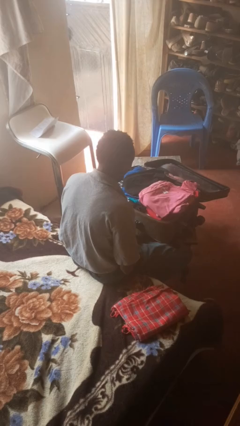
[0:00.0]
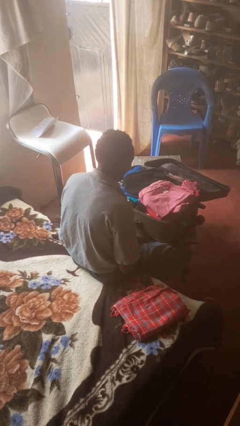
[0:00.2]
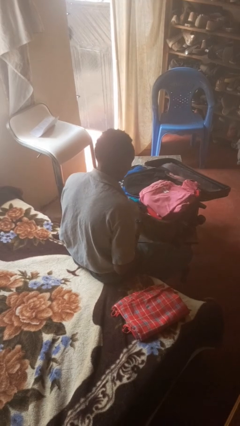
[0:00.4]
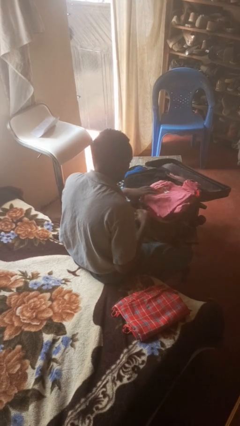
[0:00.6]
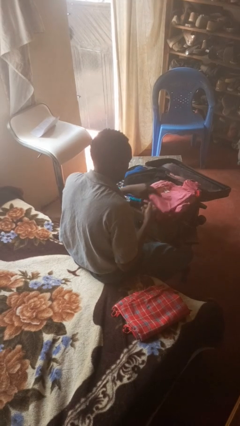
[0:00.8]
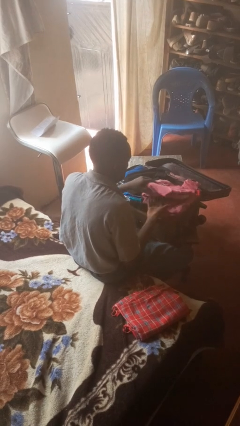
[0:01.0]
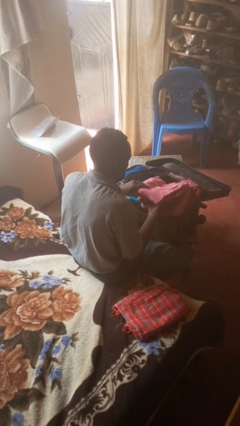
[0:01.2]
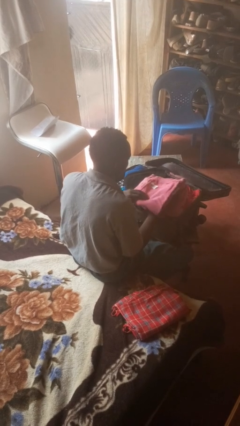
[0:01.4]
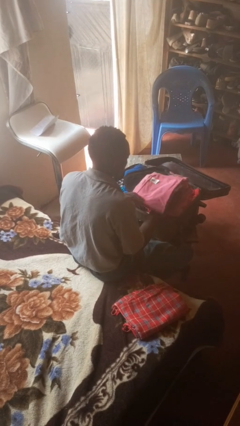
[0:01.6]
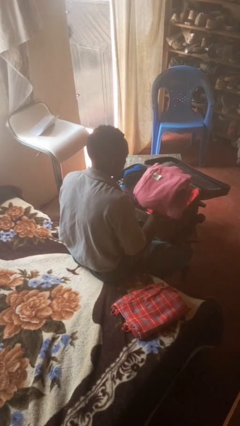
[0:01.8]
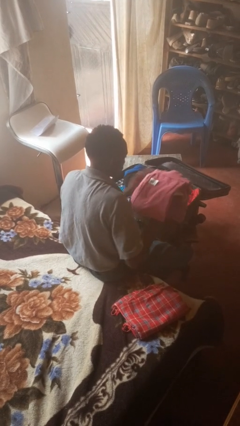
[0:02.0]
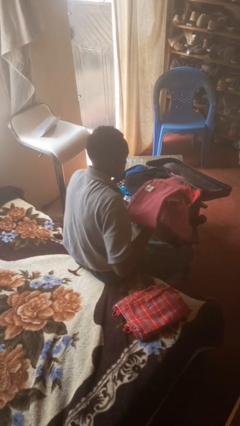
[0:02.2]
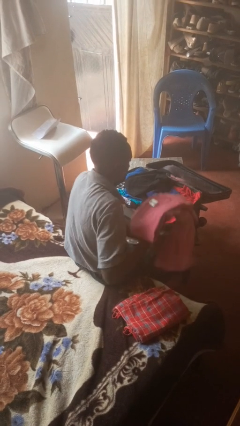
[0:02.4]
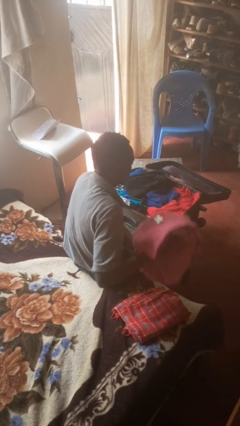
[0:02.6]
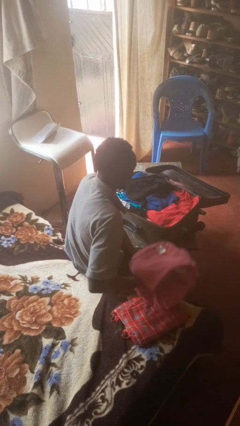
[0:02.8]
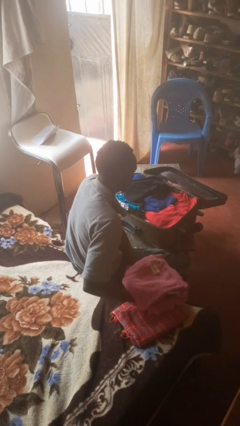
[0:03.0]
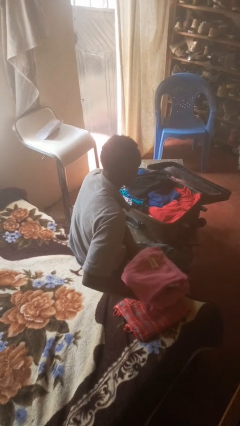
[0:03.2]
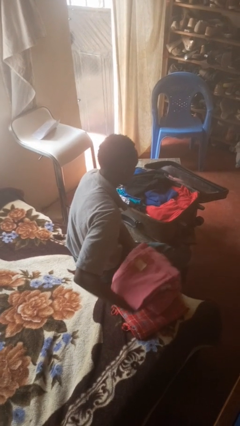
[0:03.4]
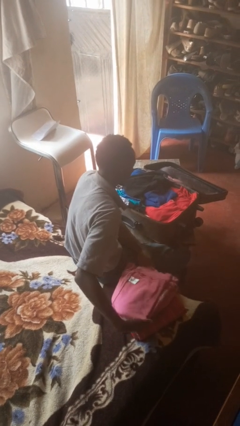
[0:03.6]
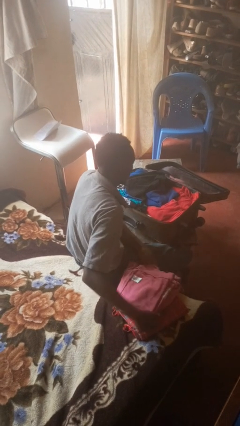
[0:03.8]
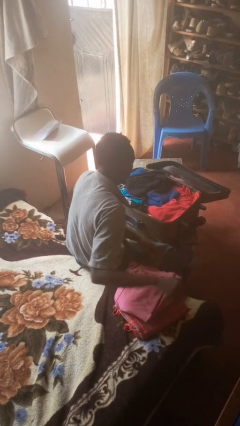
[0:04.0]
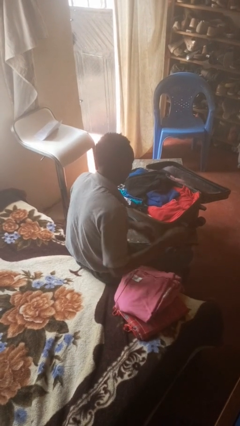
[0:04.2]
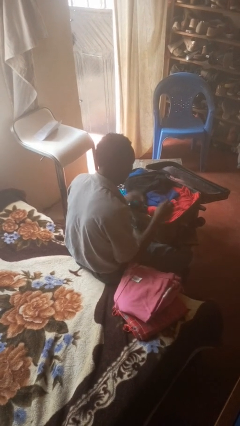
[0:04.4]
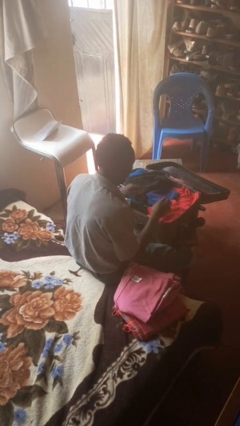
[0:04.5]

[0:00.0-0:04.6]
person unloads clothes from suitcase

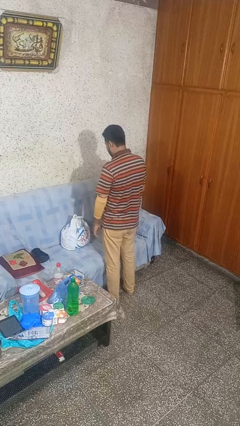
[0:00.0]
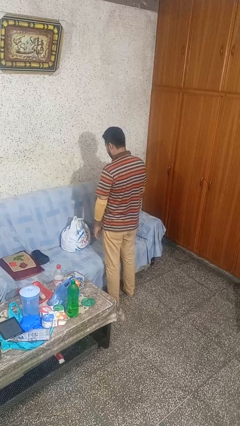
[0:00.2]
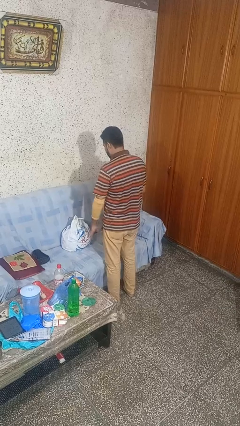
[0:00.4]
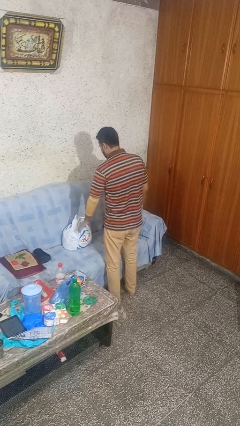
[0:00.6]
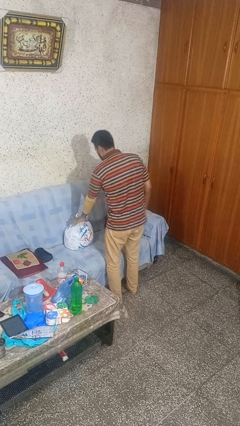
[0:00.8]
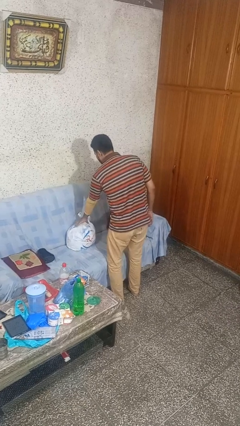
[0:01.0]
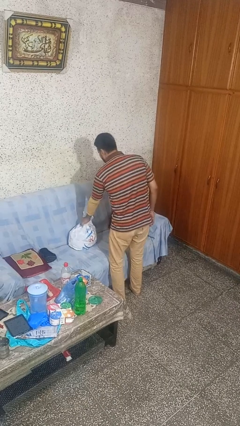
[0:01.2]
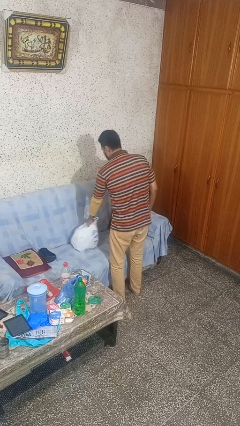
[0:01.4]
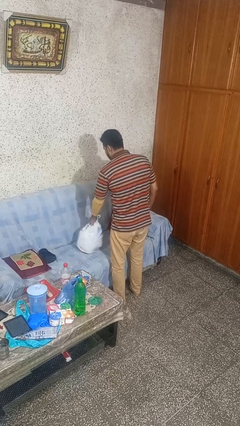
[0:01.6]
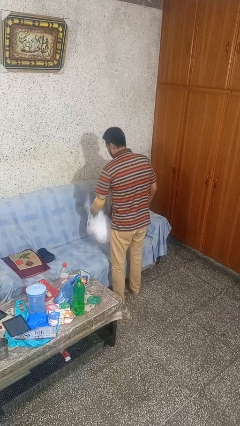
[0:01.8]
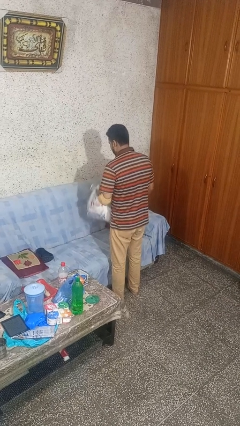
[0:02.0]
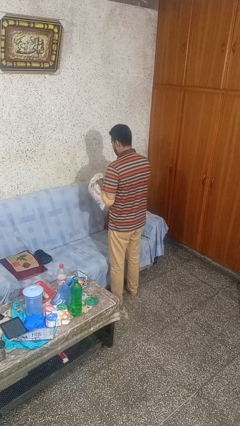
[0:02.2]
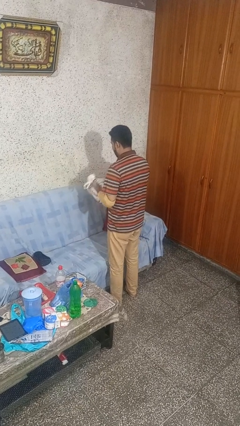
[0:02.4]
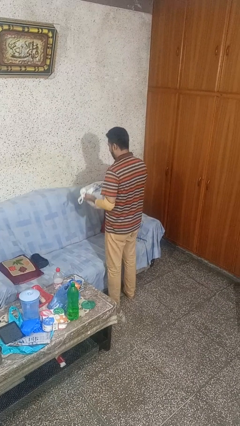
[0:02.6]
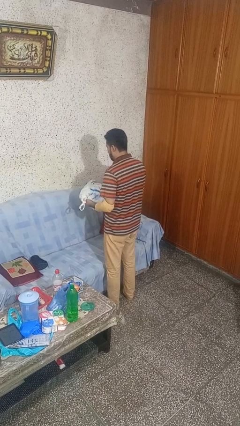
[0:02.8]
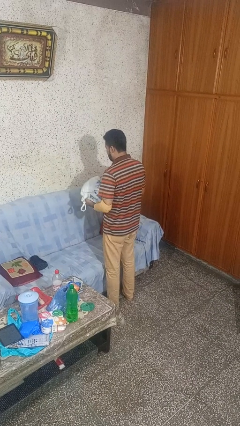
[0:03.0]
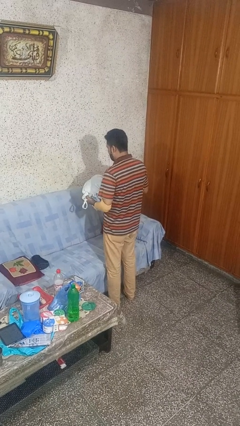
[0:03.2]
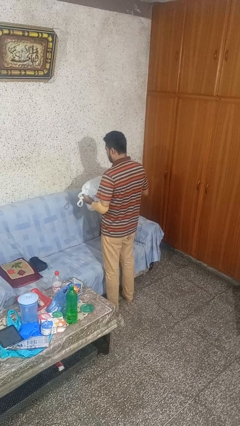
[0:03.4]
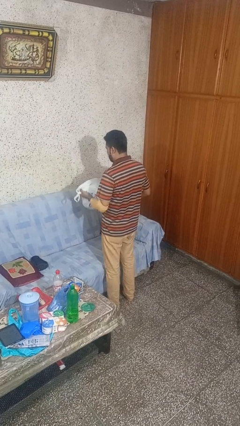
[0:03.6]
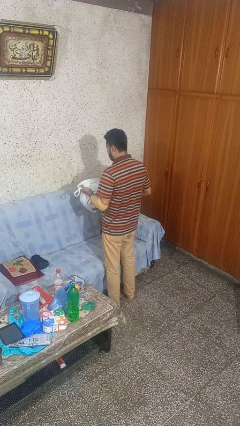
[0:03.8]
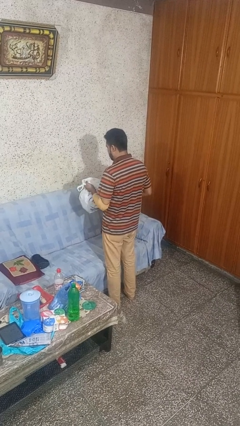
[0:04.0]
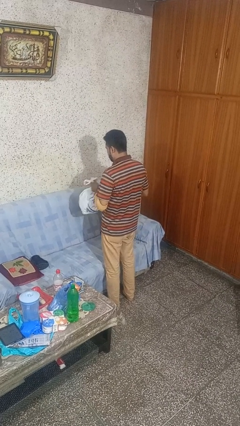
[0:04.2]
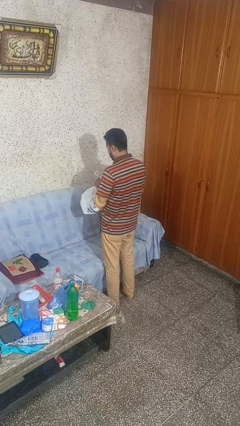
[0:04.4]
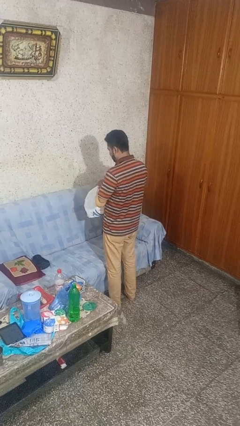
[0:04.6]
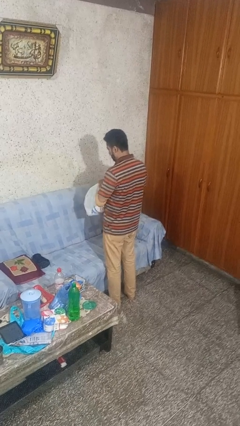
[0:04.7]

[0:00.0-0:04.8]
person picks up object from couch

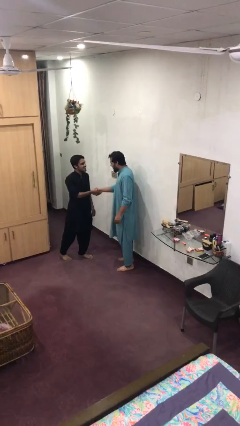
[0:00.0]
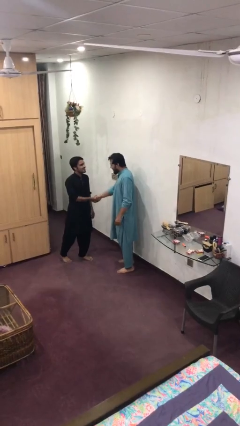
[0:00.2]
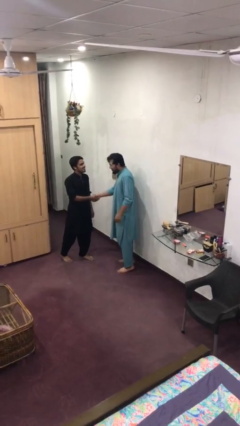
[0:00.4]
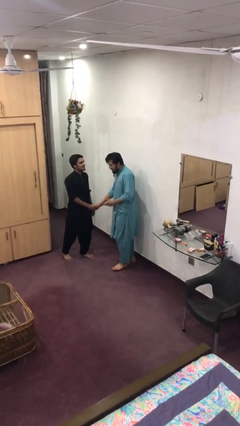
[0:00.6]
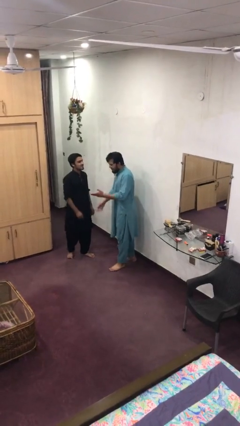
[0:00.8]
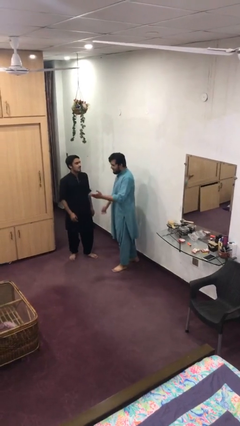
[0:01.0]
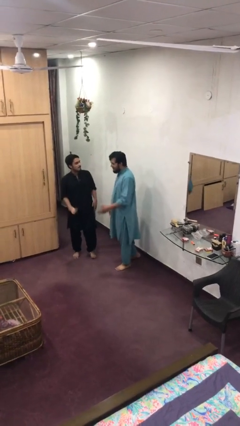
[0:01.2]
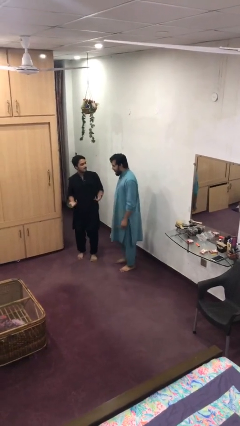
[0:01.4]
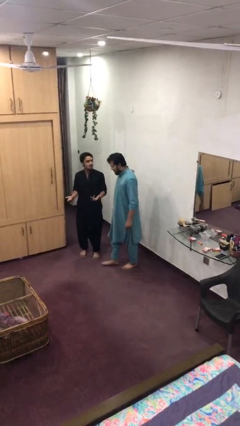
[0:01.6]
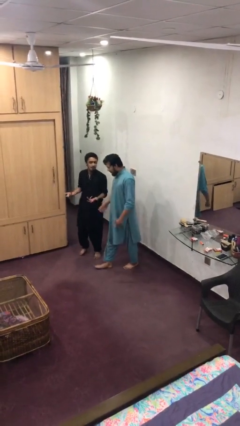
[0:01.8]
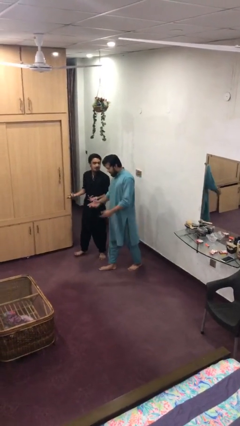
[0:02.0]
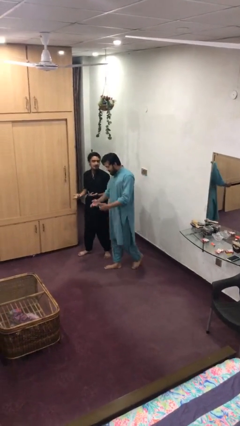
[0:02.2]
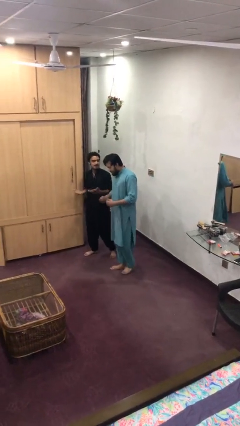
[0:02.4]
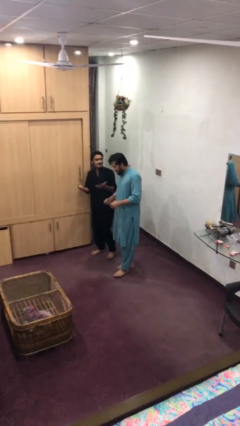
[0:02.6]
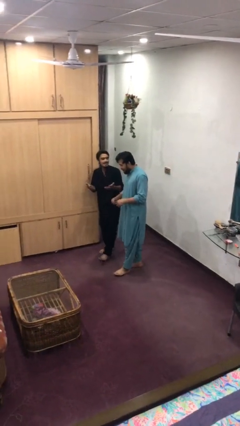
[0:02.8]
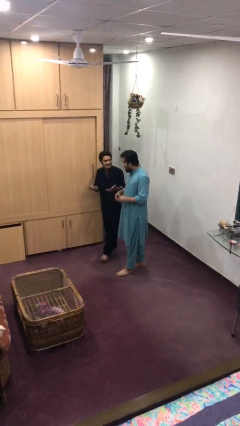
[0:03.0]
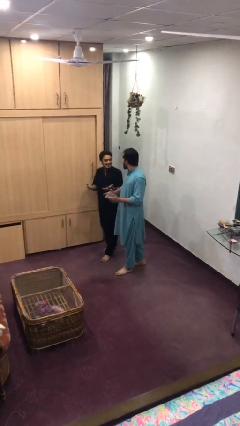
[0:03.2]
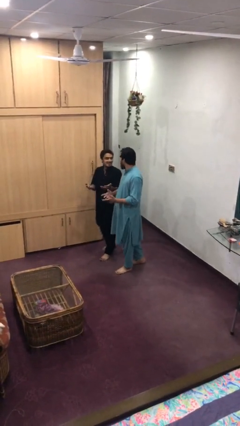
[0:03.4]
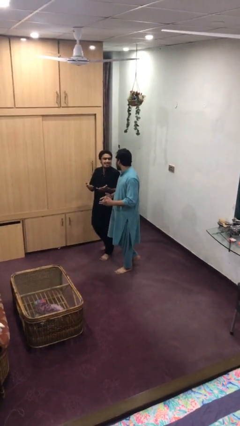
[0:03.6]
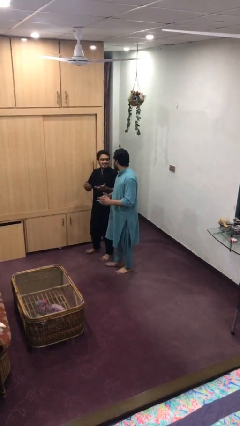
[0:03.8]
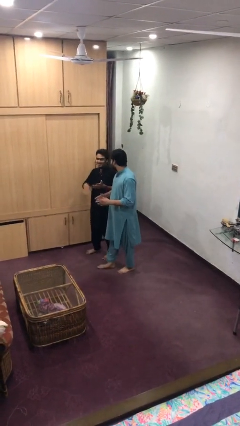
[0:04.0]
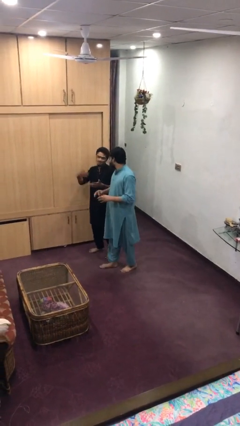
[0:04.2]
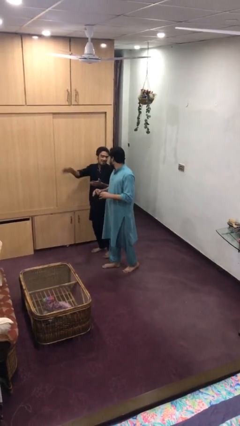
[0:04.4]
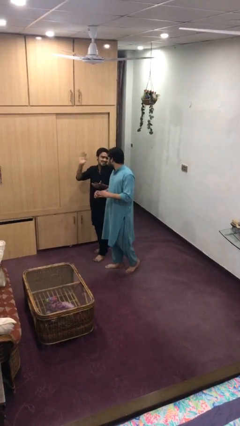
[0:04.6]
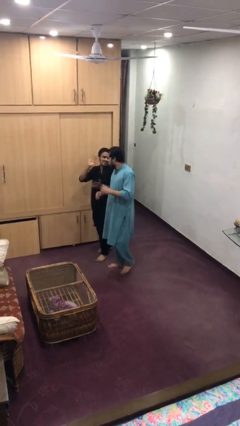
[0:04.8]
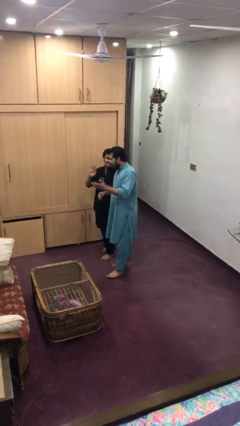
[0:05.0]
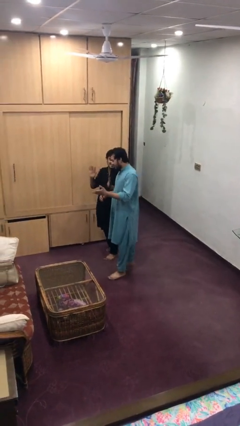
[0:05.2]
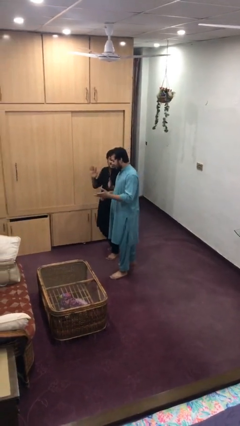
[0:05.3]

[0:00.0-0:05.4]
person talks to person

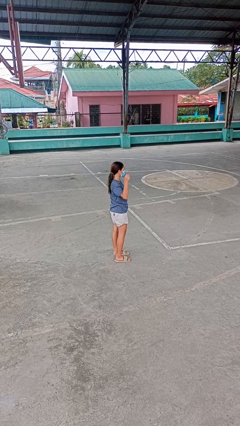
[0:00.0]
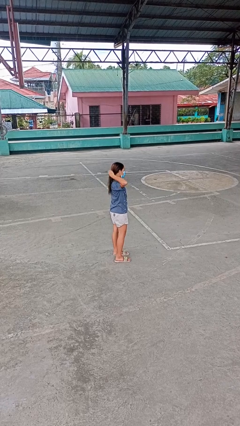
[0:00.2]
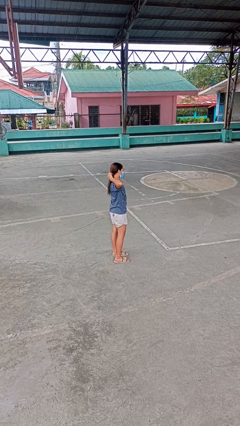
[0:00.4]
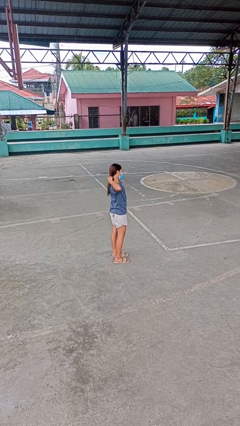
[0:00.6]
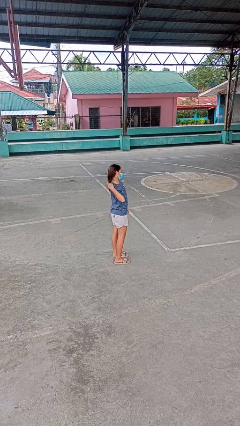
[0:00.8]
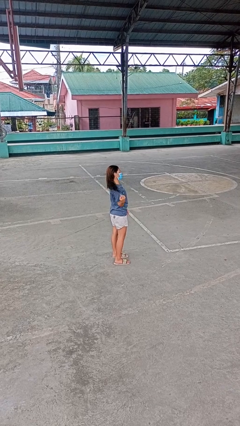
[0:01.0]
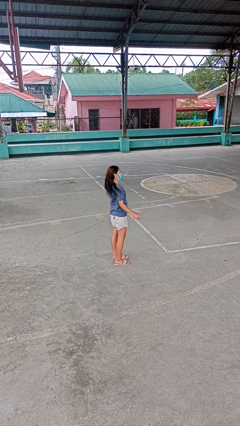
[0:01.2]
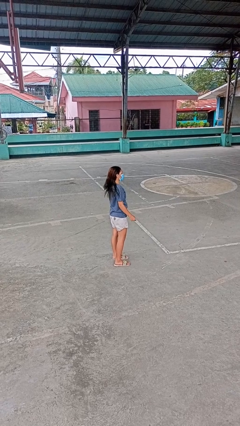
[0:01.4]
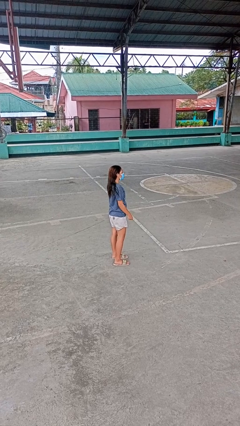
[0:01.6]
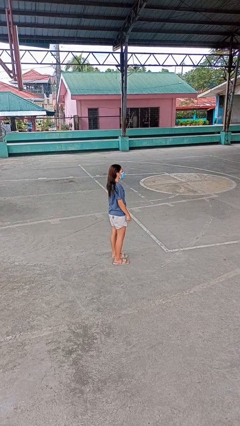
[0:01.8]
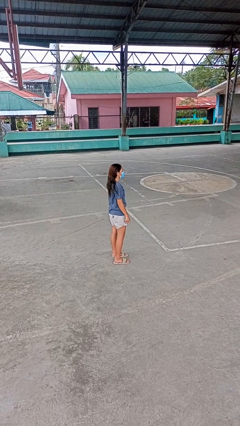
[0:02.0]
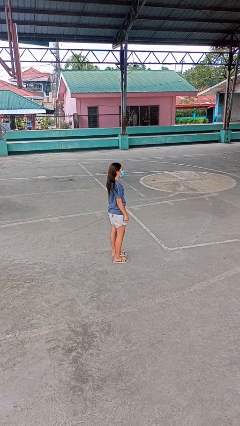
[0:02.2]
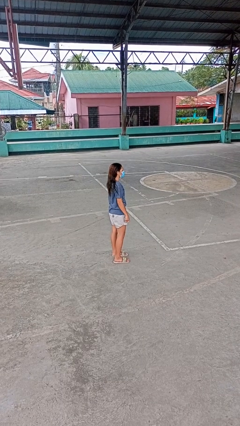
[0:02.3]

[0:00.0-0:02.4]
person takes off hairtie

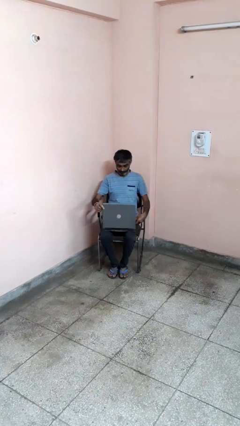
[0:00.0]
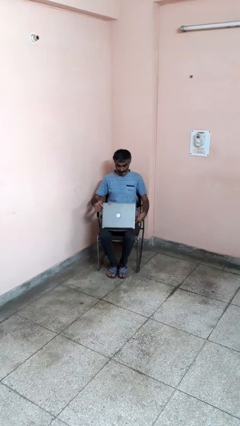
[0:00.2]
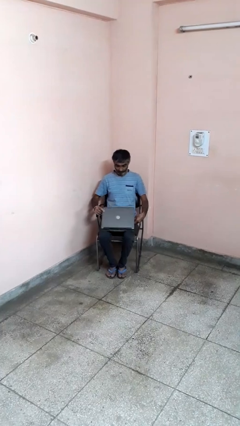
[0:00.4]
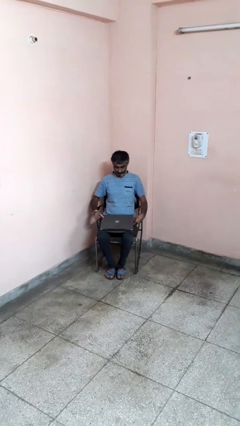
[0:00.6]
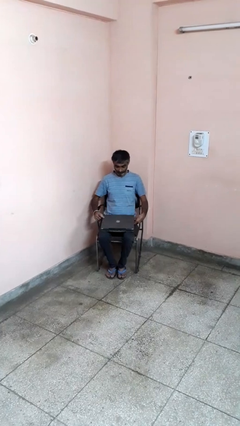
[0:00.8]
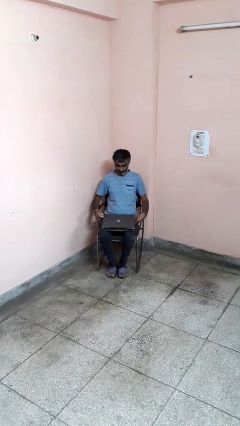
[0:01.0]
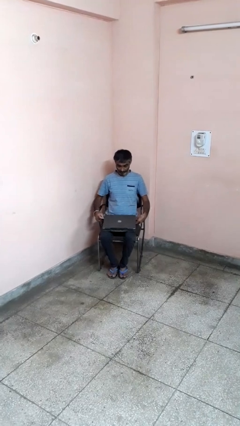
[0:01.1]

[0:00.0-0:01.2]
person closes laptop
